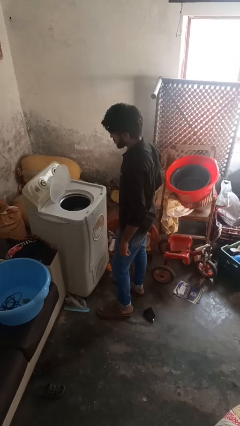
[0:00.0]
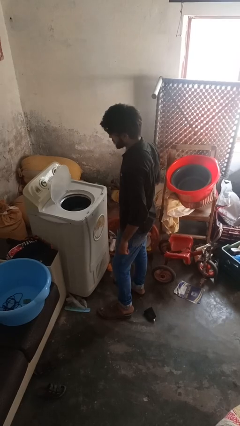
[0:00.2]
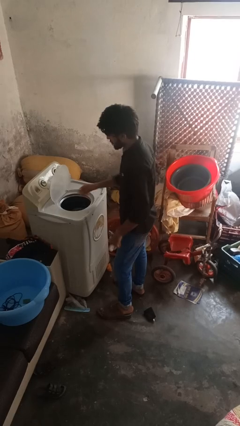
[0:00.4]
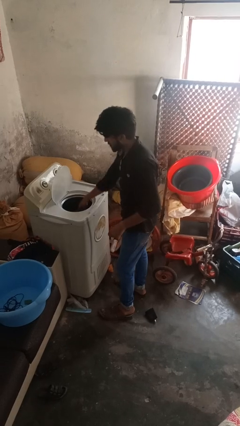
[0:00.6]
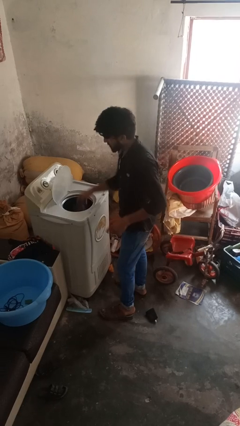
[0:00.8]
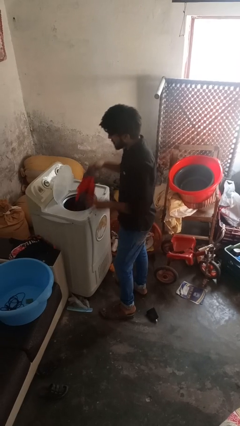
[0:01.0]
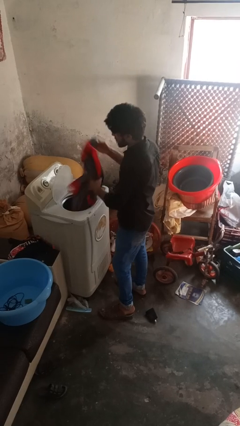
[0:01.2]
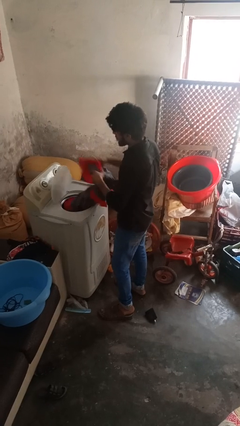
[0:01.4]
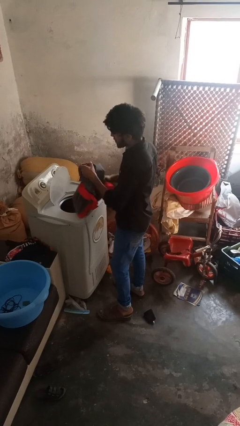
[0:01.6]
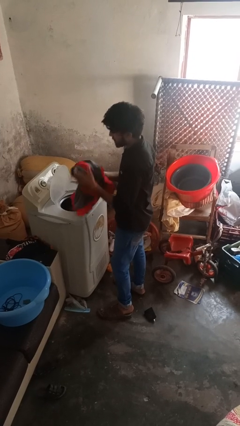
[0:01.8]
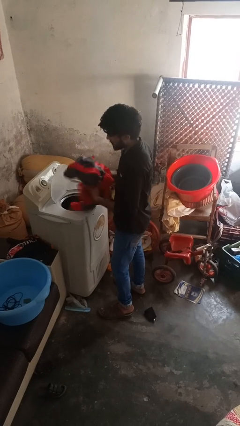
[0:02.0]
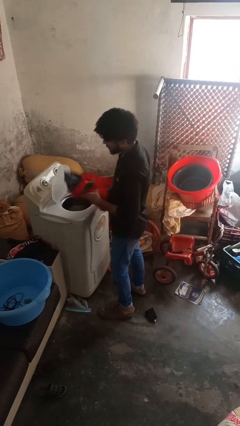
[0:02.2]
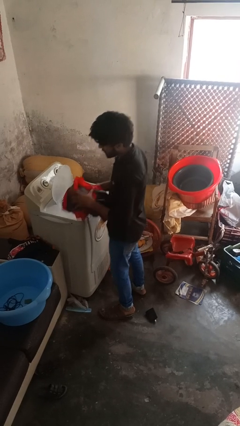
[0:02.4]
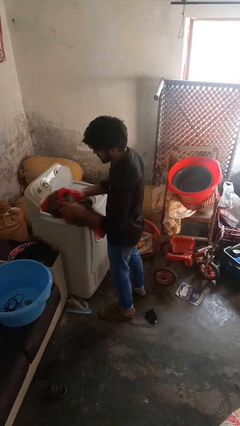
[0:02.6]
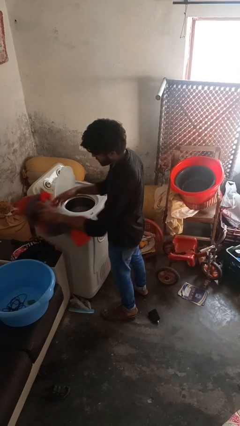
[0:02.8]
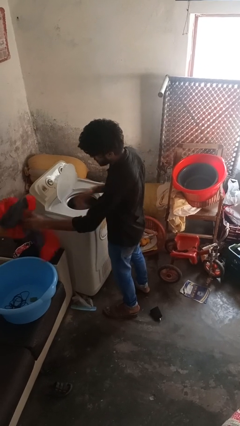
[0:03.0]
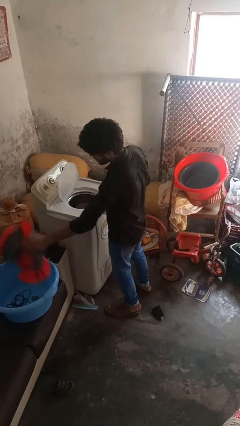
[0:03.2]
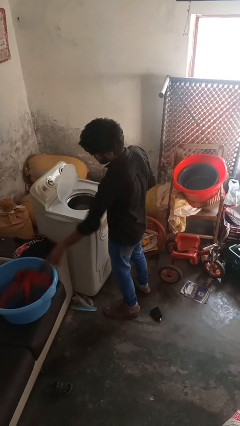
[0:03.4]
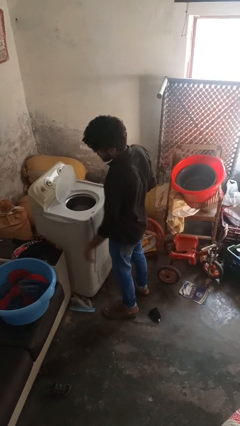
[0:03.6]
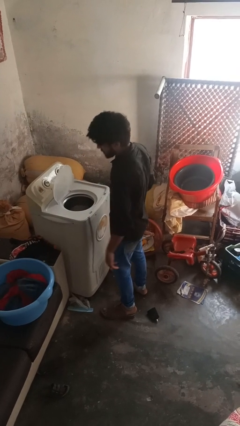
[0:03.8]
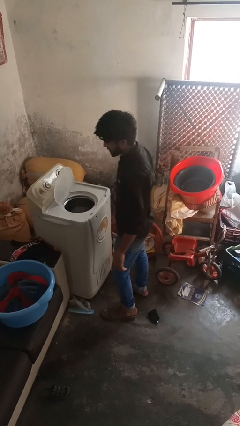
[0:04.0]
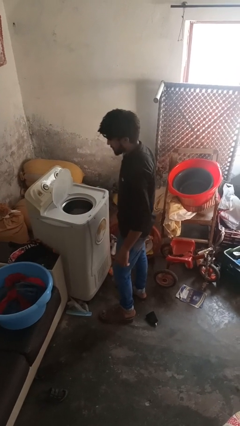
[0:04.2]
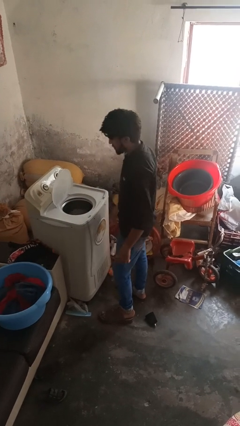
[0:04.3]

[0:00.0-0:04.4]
person loads clotheswasher

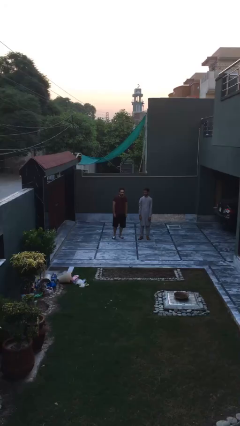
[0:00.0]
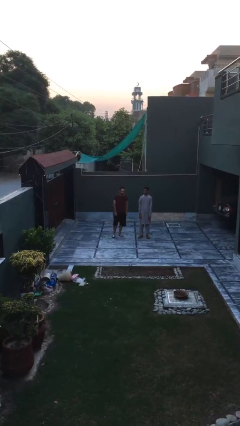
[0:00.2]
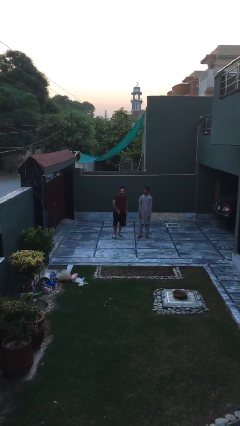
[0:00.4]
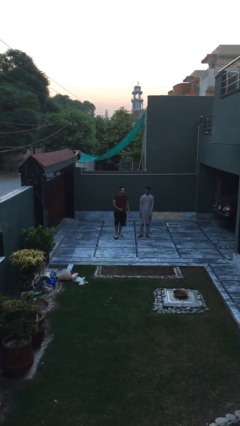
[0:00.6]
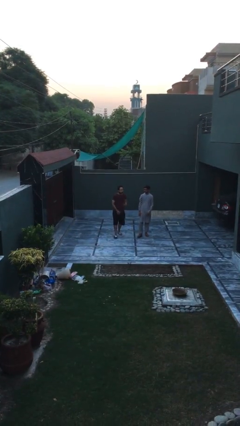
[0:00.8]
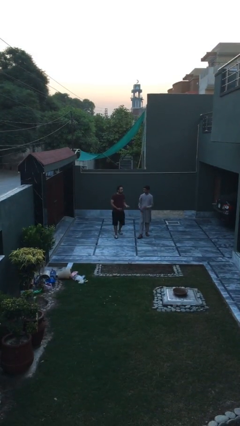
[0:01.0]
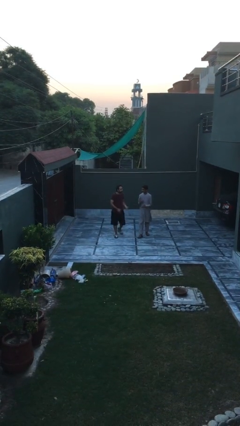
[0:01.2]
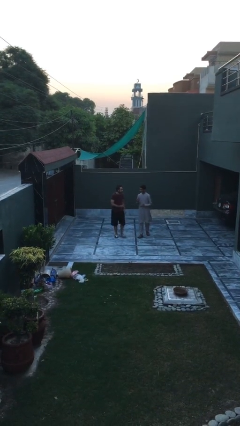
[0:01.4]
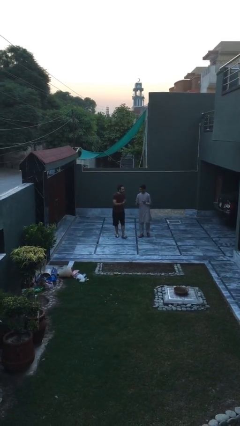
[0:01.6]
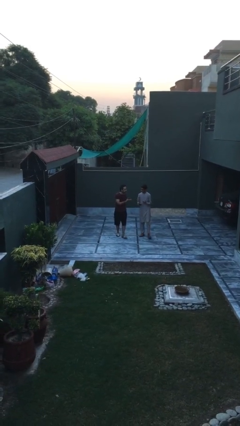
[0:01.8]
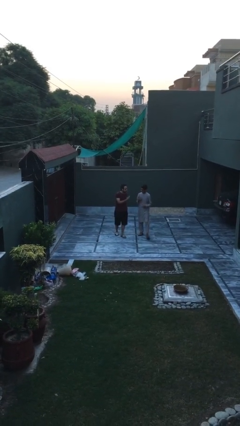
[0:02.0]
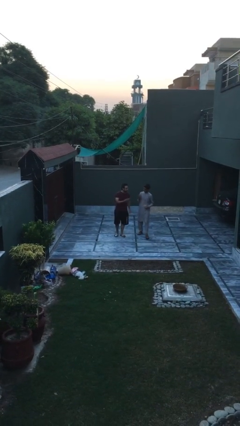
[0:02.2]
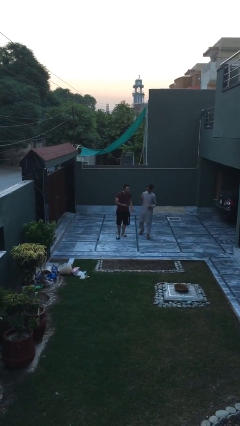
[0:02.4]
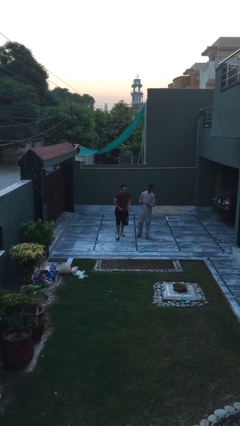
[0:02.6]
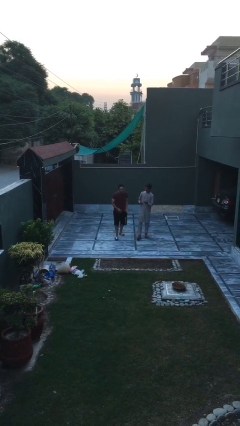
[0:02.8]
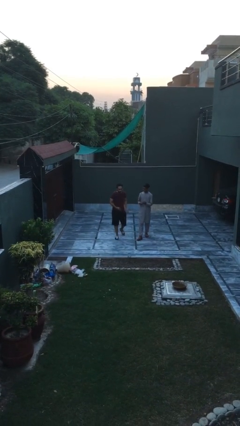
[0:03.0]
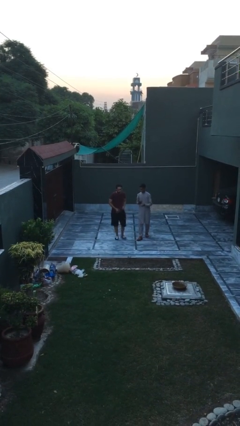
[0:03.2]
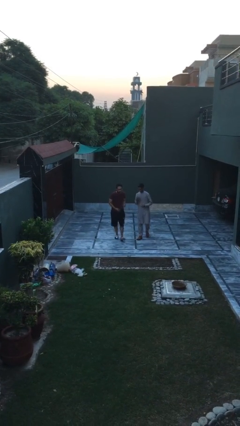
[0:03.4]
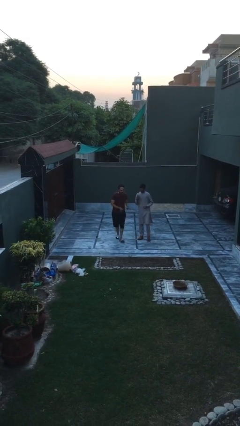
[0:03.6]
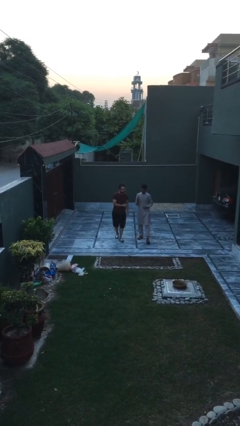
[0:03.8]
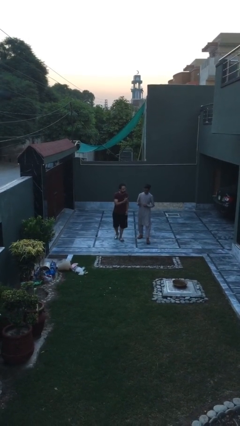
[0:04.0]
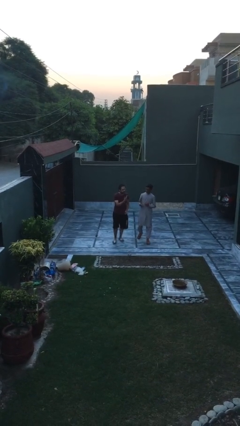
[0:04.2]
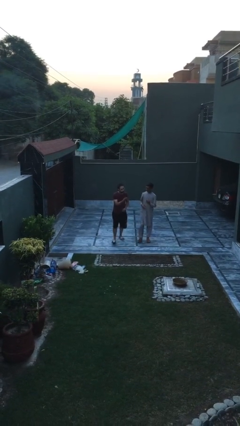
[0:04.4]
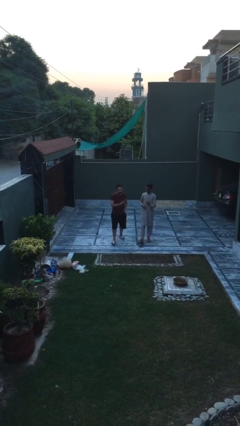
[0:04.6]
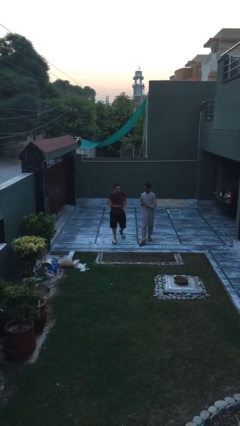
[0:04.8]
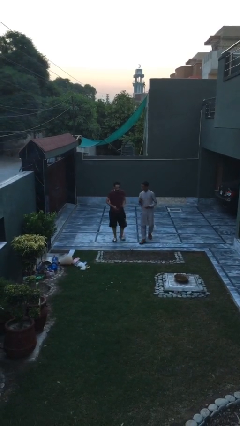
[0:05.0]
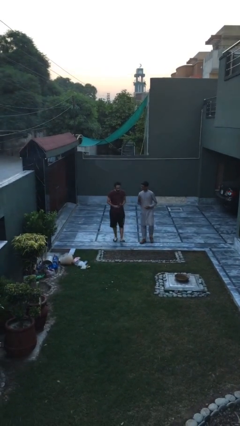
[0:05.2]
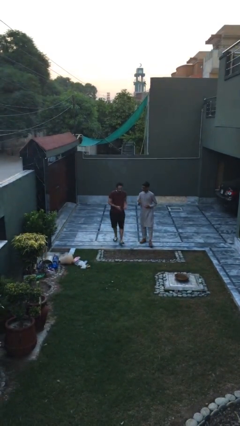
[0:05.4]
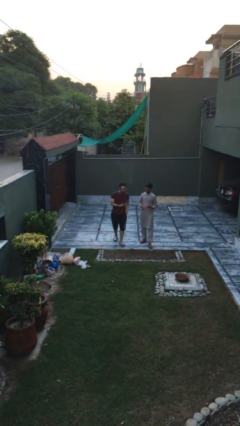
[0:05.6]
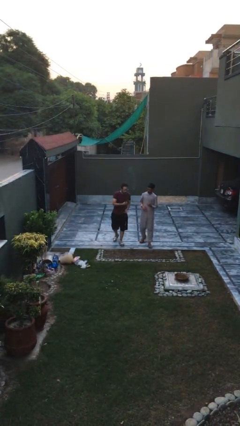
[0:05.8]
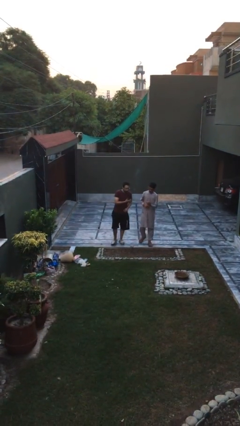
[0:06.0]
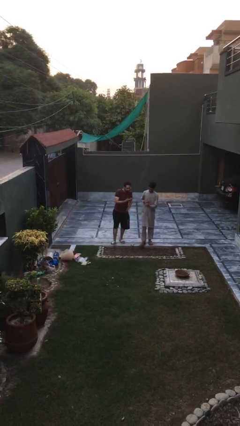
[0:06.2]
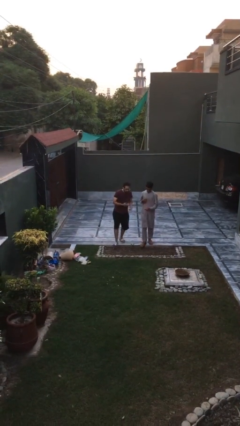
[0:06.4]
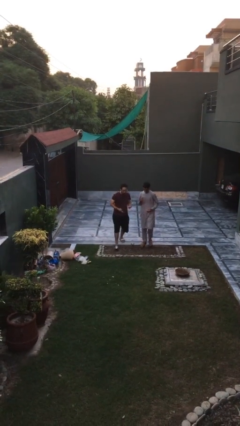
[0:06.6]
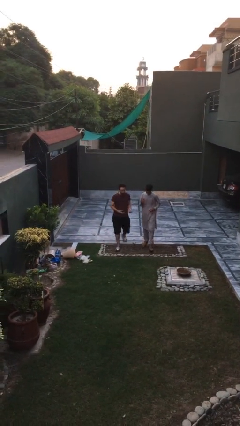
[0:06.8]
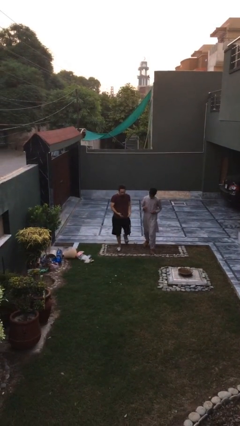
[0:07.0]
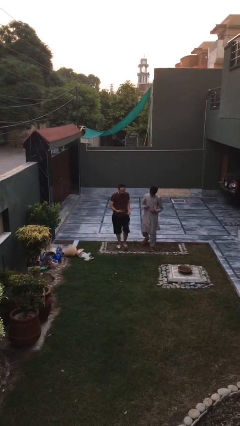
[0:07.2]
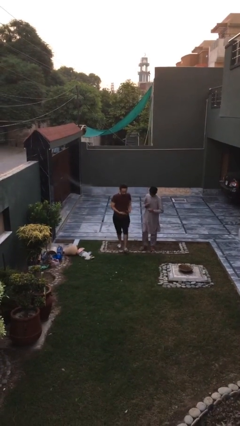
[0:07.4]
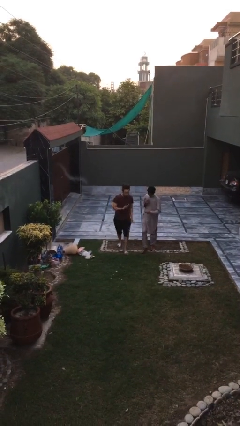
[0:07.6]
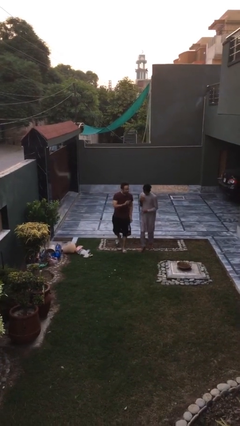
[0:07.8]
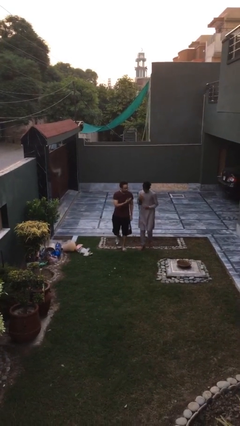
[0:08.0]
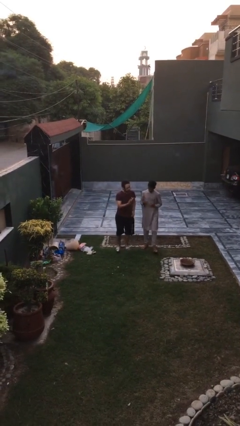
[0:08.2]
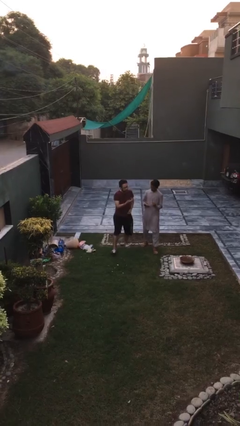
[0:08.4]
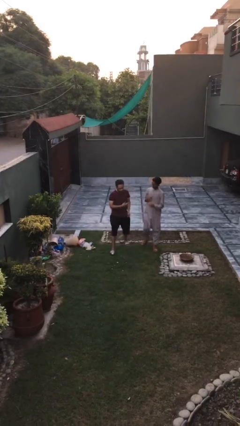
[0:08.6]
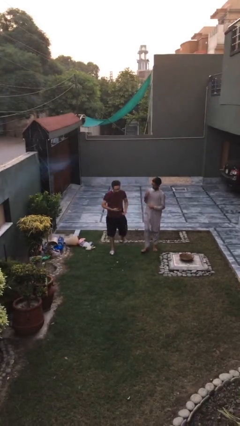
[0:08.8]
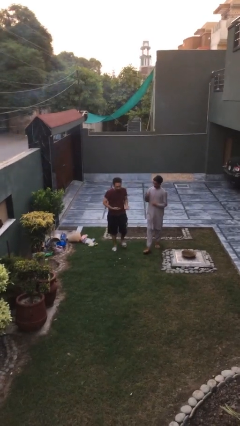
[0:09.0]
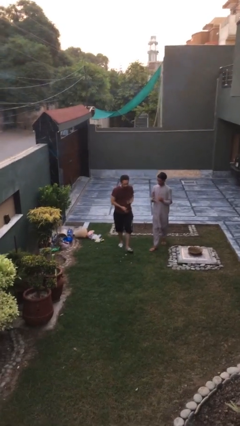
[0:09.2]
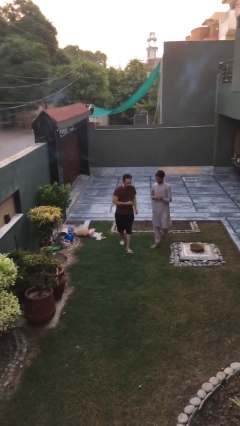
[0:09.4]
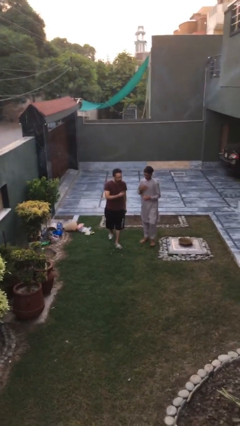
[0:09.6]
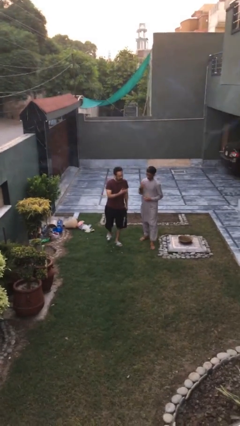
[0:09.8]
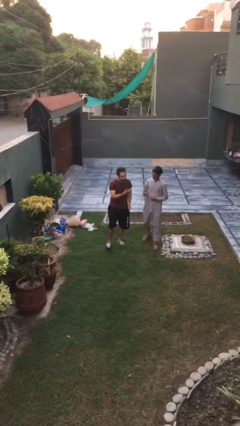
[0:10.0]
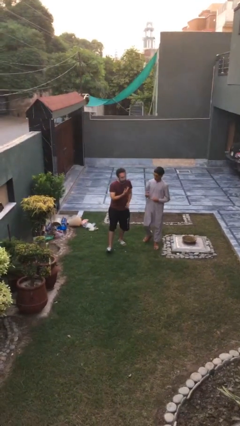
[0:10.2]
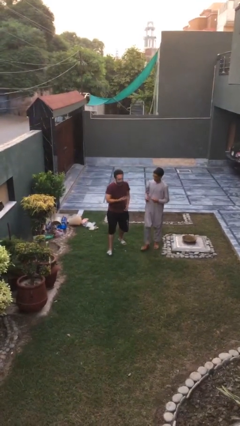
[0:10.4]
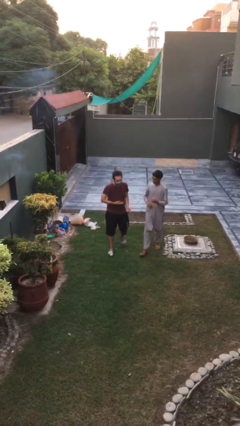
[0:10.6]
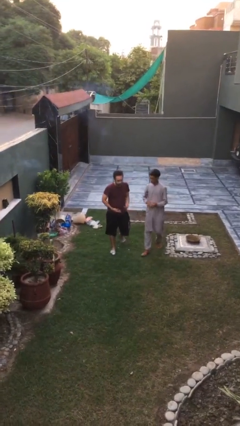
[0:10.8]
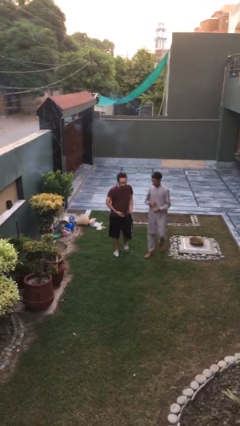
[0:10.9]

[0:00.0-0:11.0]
person talks to person

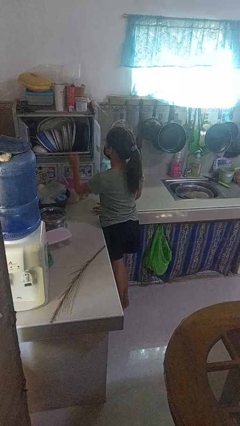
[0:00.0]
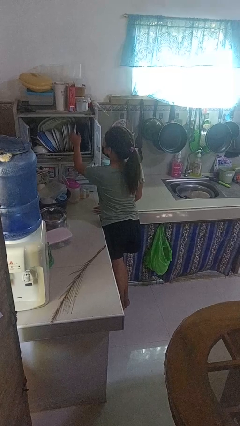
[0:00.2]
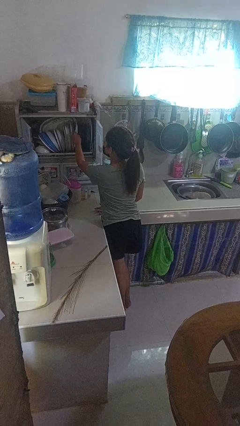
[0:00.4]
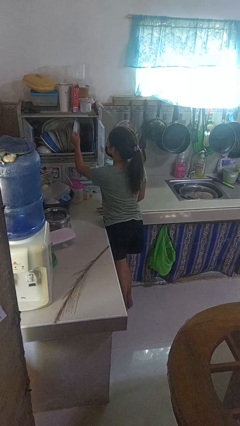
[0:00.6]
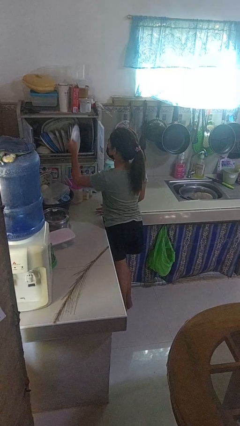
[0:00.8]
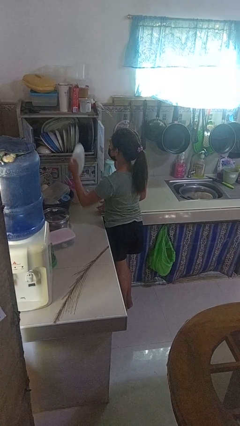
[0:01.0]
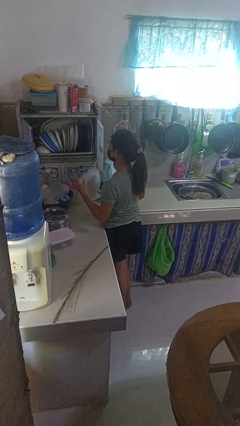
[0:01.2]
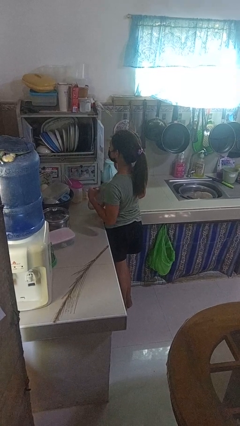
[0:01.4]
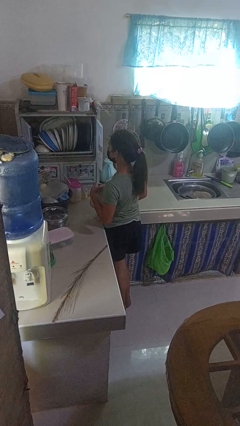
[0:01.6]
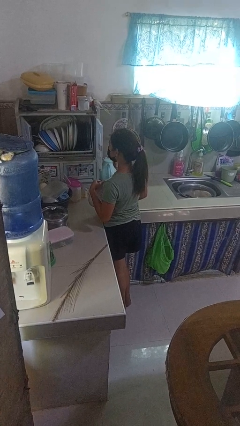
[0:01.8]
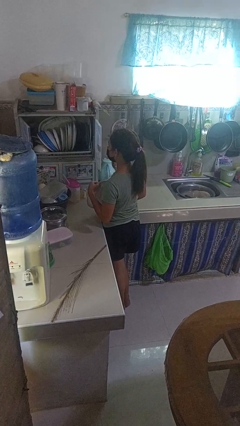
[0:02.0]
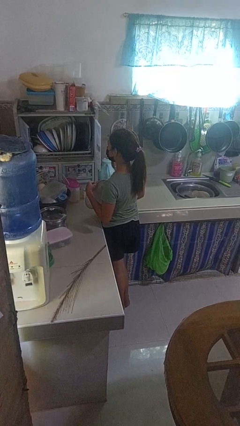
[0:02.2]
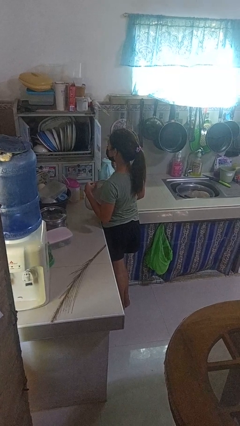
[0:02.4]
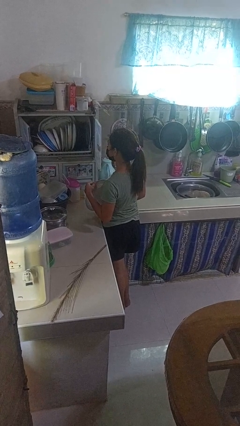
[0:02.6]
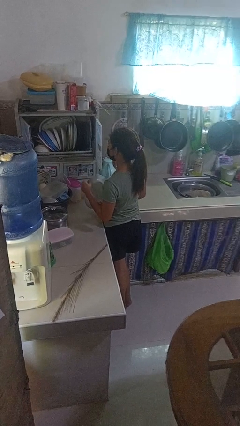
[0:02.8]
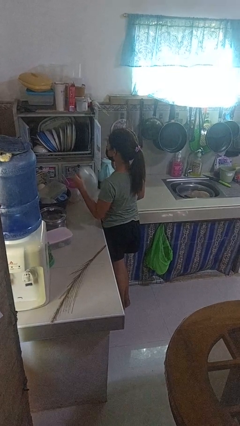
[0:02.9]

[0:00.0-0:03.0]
person takes object from kitchen drawer
